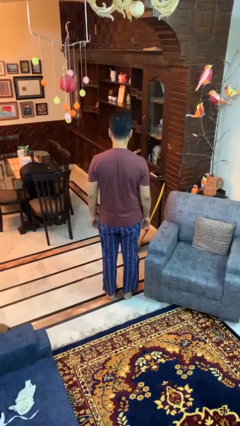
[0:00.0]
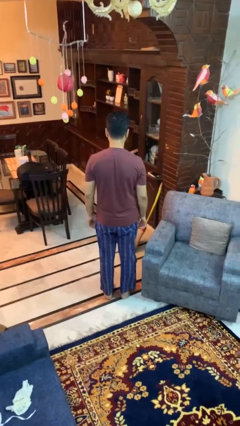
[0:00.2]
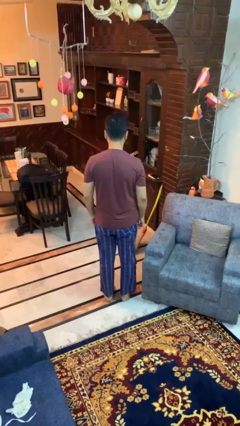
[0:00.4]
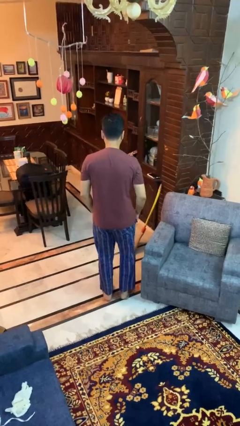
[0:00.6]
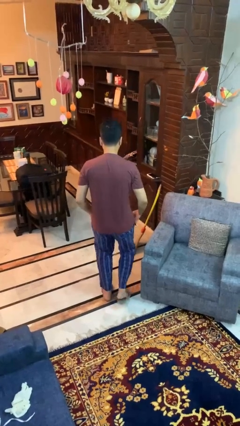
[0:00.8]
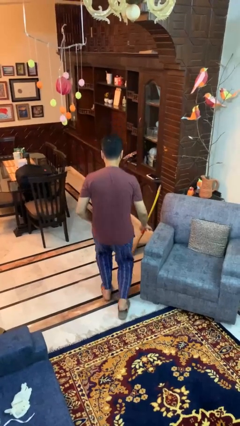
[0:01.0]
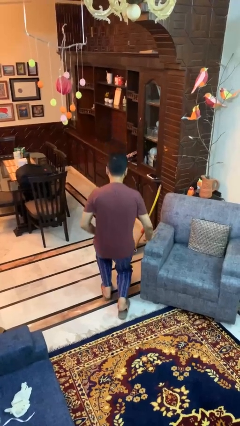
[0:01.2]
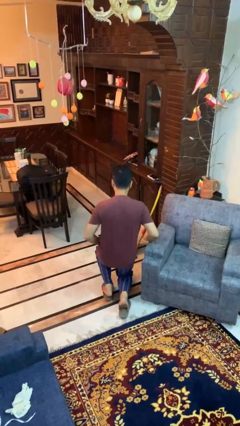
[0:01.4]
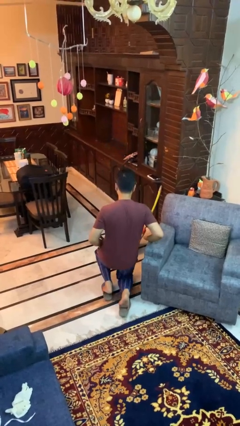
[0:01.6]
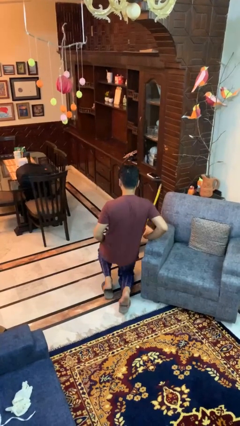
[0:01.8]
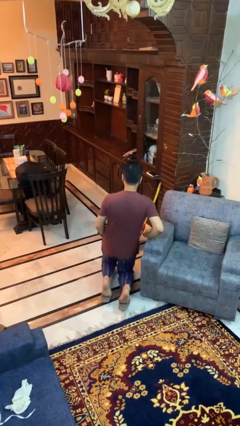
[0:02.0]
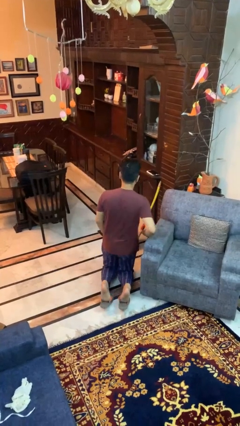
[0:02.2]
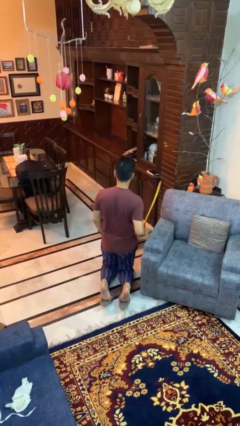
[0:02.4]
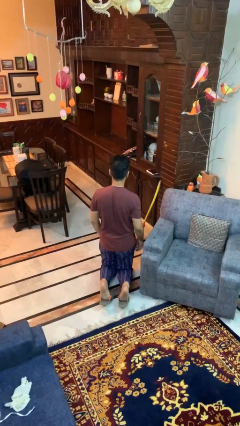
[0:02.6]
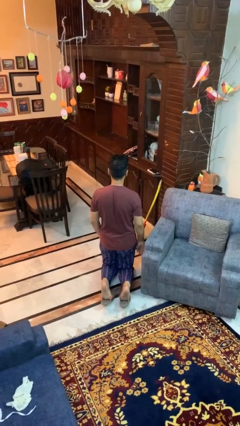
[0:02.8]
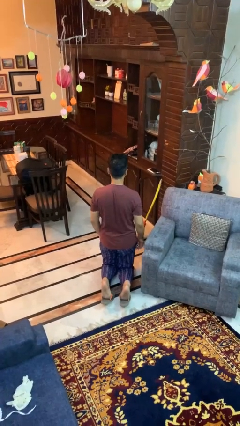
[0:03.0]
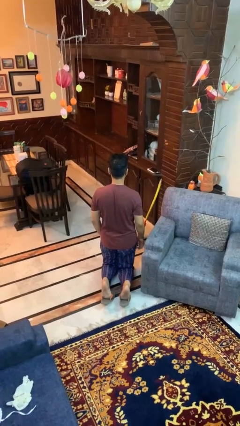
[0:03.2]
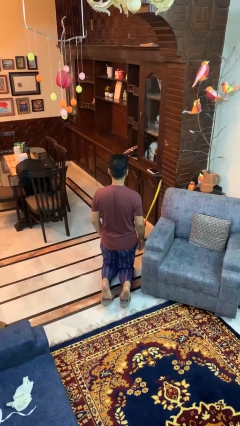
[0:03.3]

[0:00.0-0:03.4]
person kneels

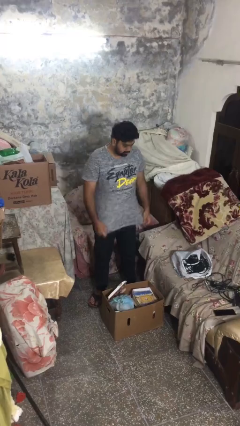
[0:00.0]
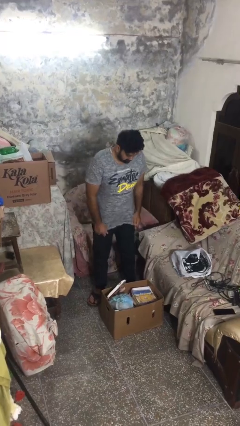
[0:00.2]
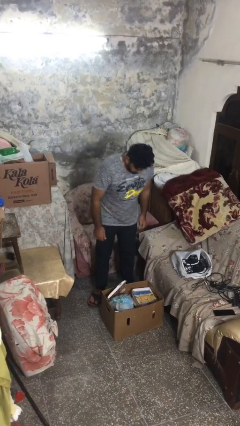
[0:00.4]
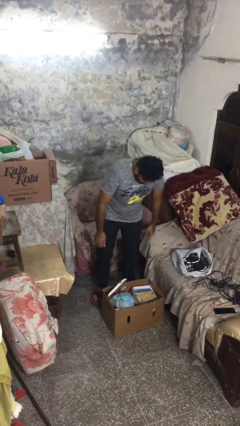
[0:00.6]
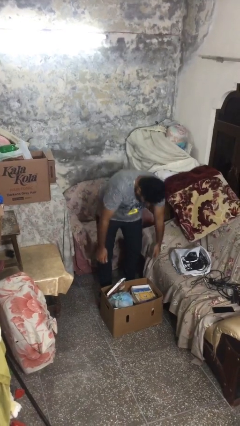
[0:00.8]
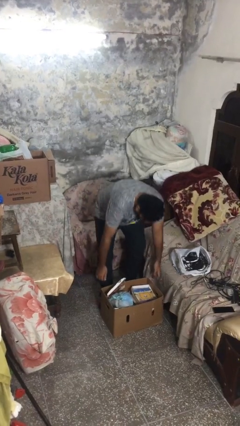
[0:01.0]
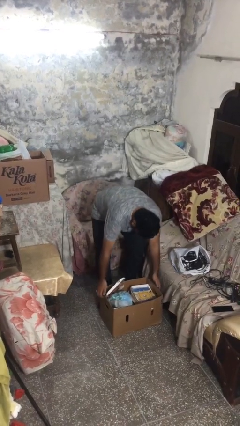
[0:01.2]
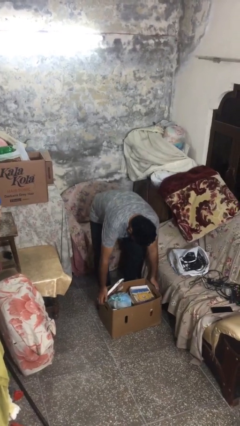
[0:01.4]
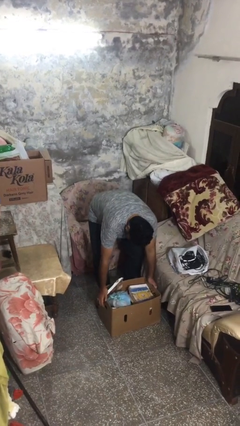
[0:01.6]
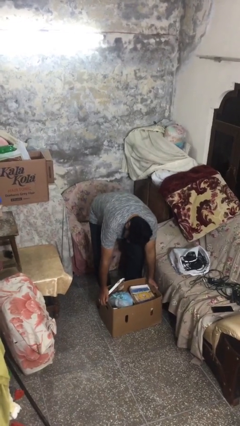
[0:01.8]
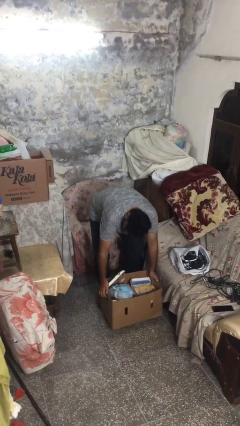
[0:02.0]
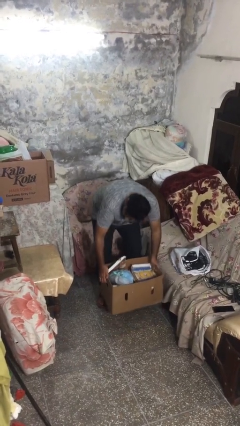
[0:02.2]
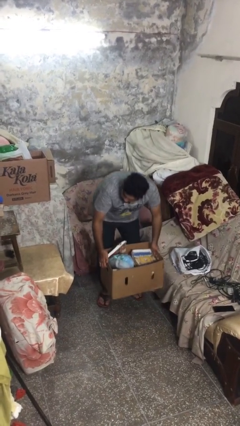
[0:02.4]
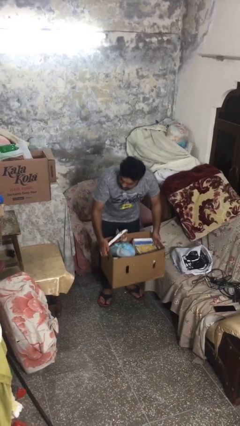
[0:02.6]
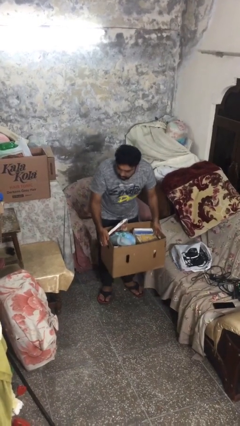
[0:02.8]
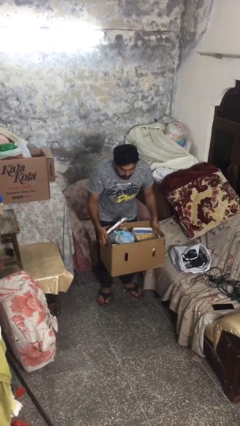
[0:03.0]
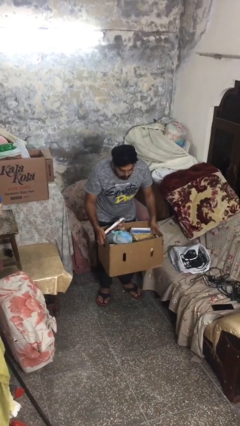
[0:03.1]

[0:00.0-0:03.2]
person picks up object from floor

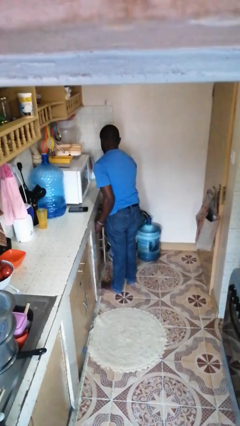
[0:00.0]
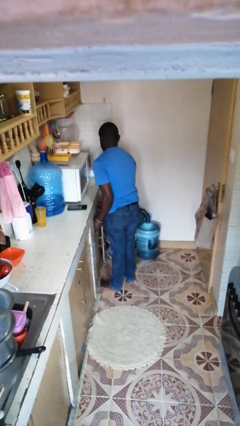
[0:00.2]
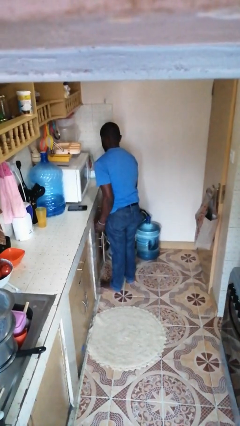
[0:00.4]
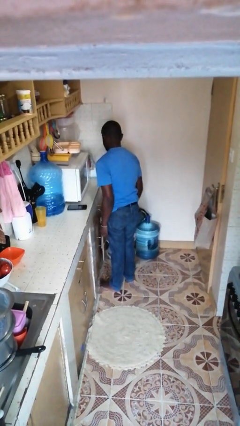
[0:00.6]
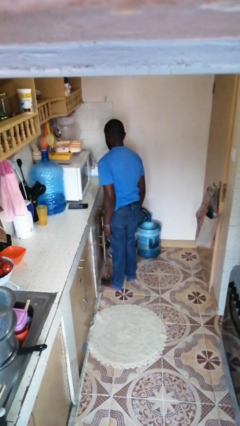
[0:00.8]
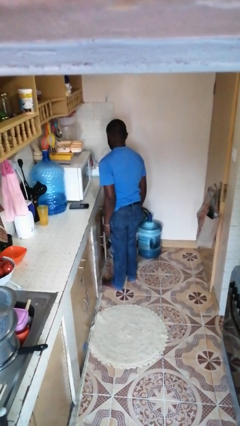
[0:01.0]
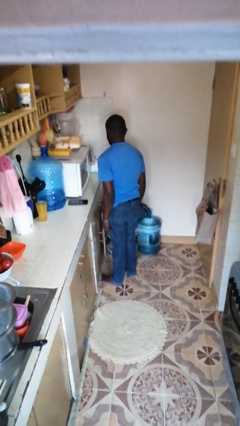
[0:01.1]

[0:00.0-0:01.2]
person opens kitchen drawer

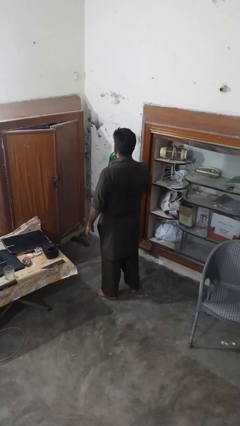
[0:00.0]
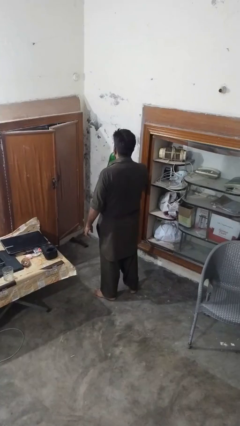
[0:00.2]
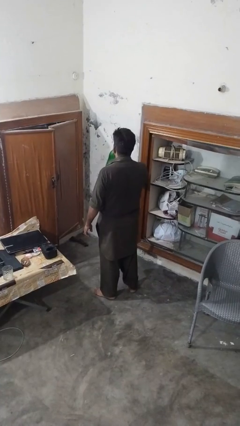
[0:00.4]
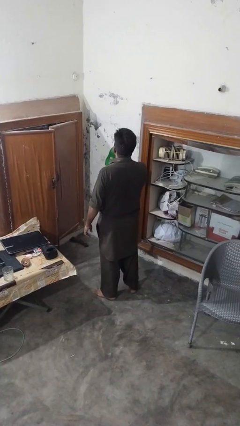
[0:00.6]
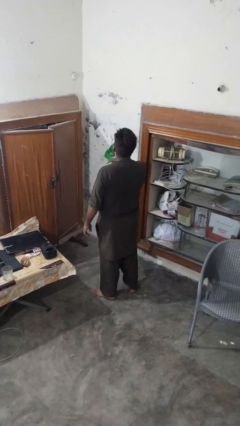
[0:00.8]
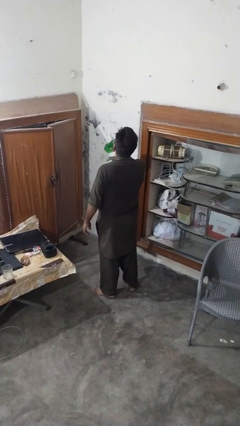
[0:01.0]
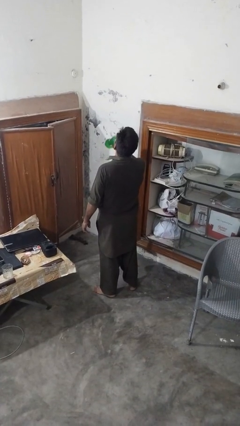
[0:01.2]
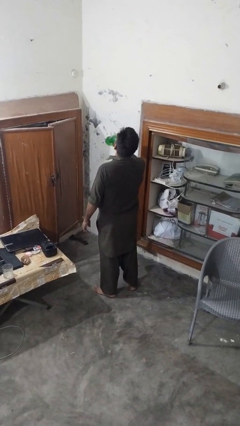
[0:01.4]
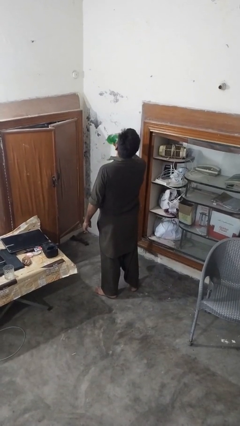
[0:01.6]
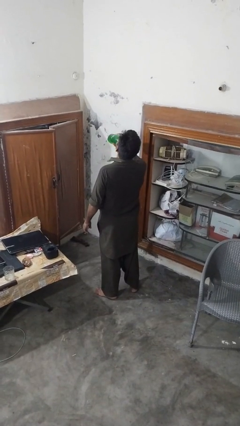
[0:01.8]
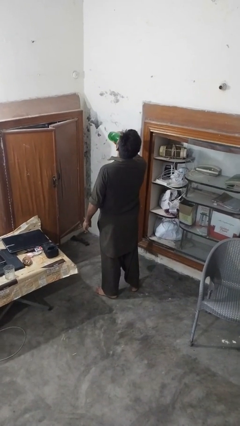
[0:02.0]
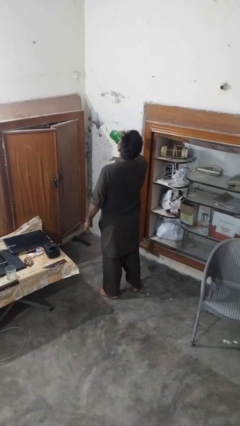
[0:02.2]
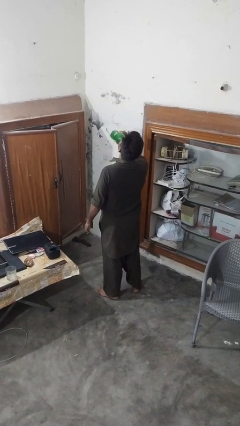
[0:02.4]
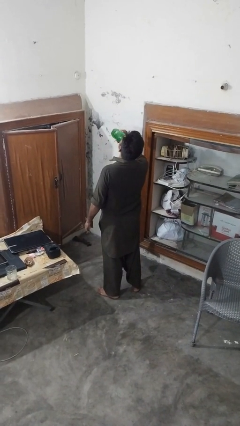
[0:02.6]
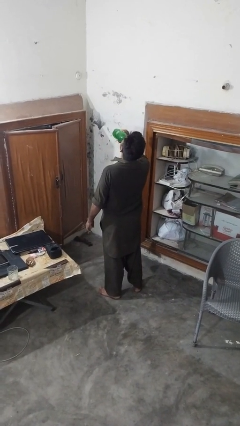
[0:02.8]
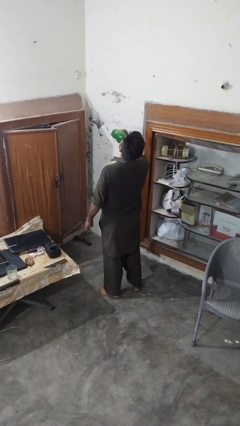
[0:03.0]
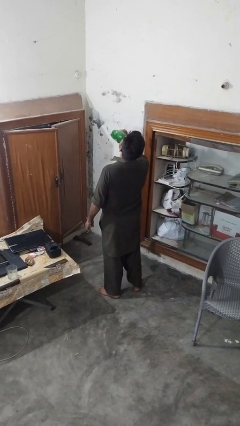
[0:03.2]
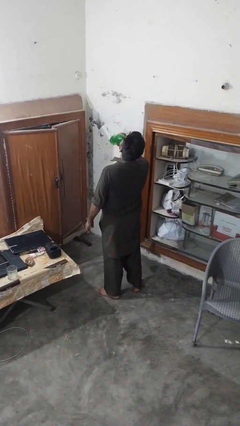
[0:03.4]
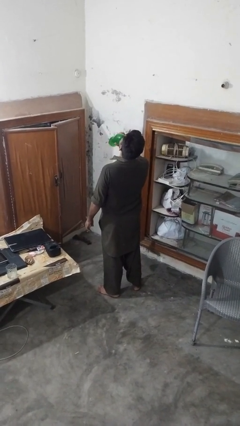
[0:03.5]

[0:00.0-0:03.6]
person drinks from bottle

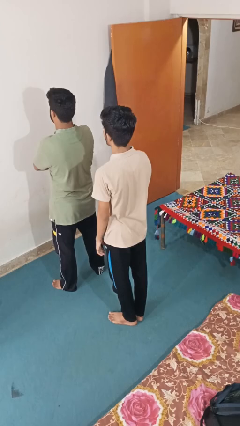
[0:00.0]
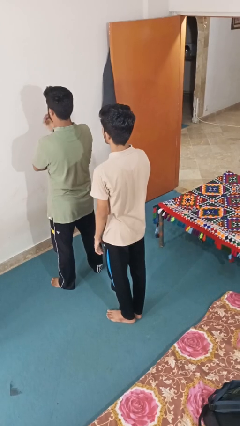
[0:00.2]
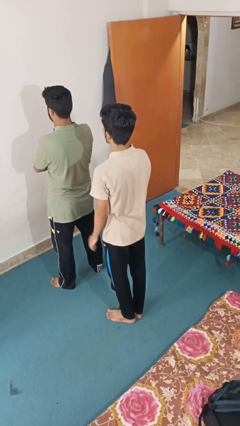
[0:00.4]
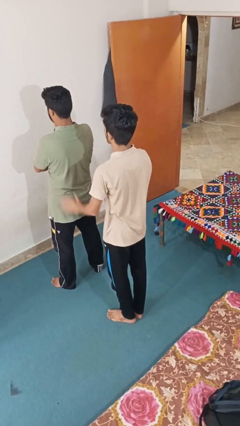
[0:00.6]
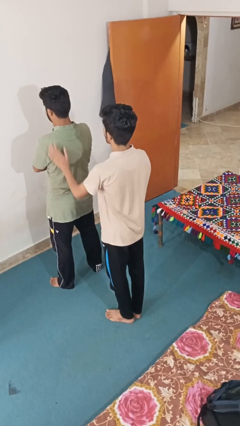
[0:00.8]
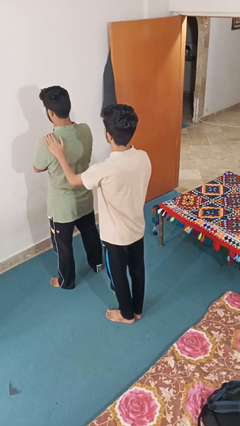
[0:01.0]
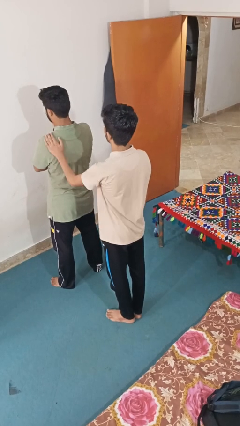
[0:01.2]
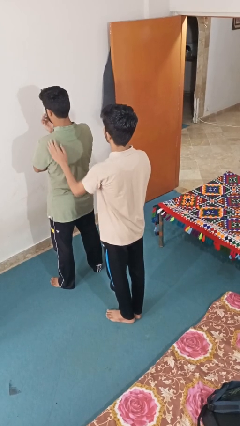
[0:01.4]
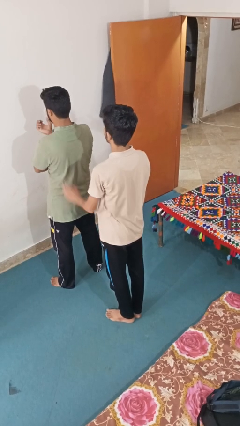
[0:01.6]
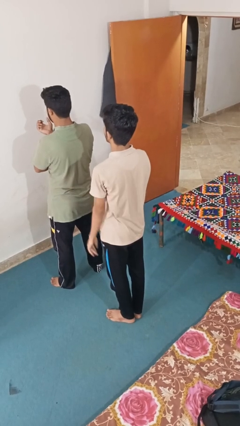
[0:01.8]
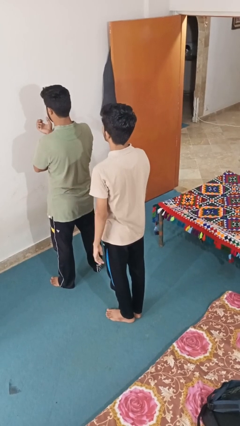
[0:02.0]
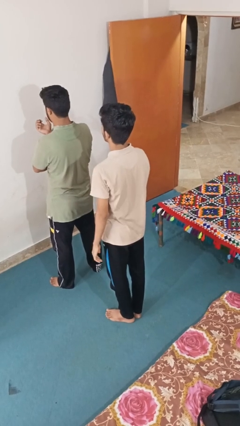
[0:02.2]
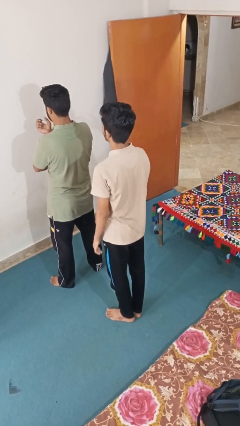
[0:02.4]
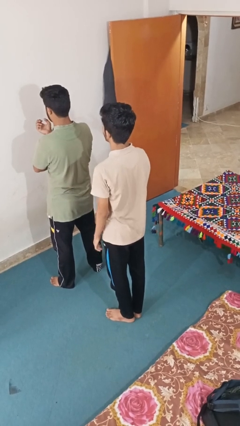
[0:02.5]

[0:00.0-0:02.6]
person touches back of person

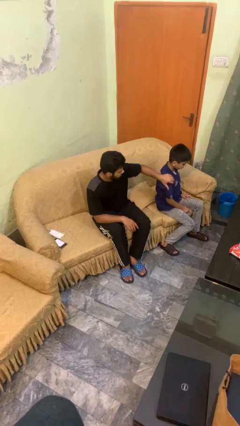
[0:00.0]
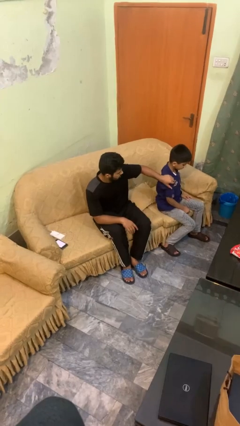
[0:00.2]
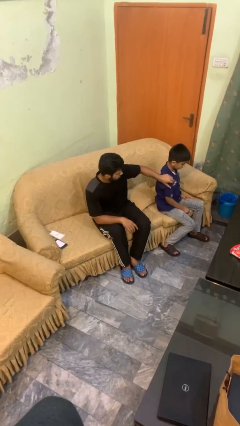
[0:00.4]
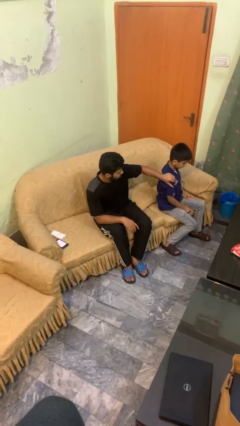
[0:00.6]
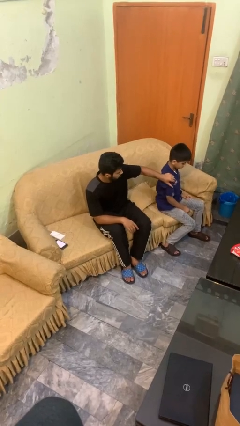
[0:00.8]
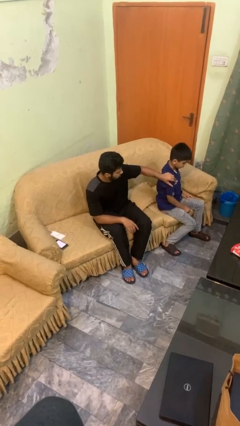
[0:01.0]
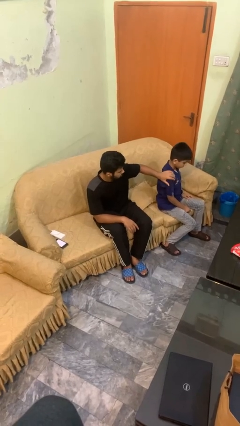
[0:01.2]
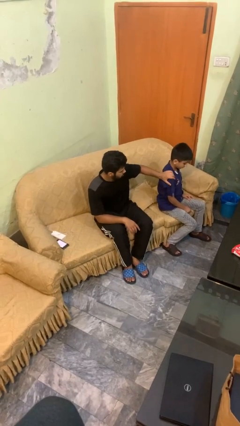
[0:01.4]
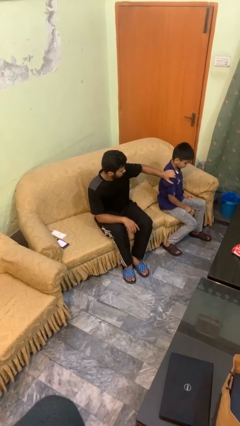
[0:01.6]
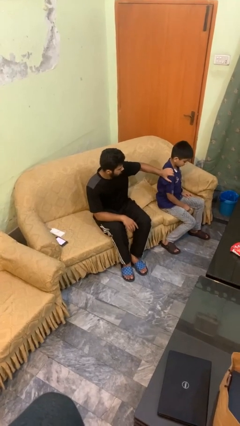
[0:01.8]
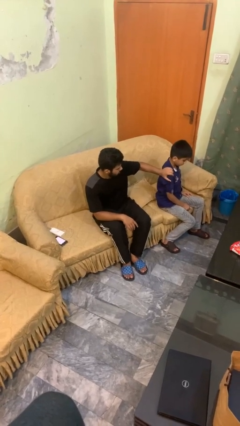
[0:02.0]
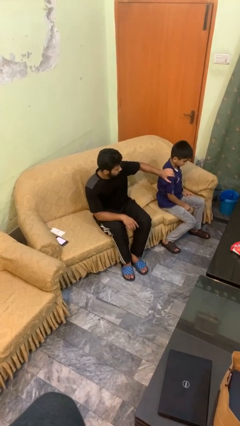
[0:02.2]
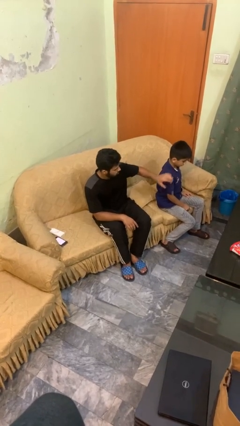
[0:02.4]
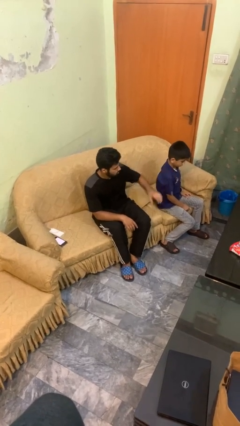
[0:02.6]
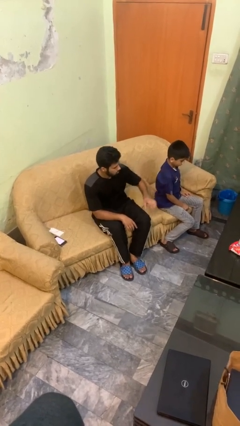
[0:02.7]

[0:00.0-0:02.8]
person pounds shoulders of person

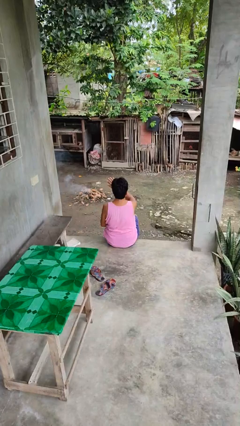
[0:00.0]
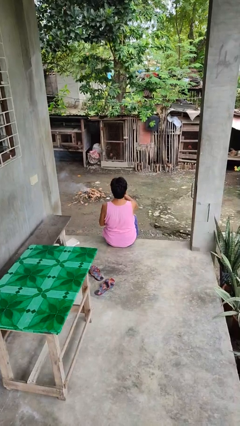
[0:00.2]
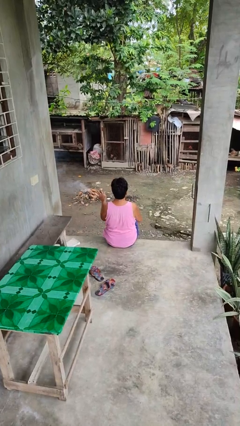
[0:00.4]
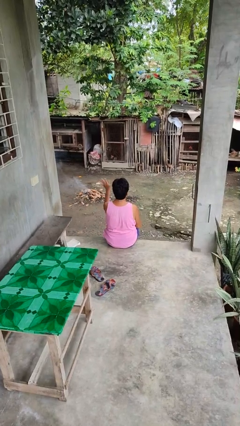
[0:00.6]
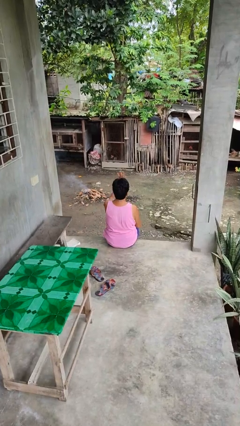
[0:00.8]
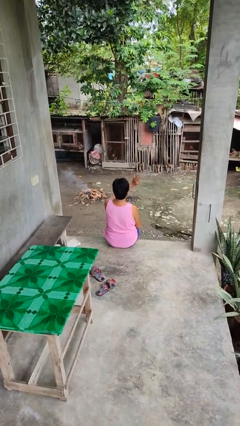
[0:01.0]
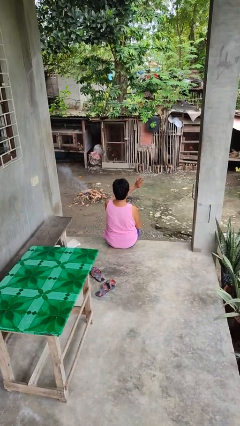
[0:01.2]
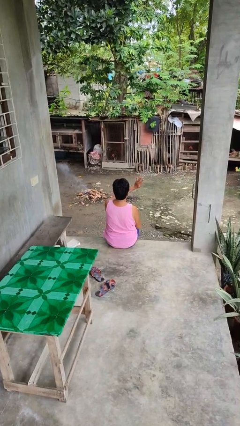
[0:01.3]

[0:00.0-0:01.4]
person gestures swipe right
